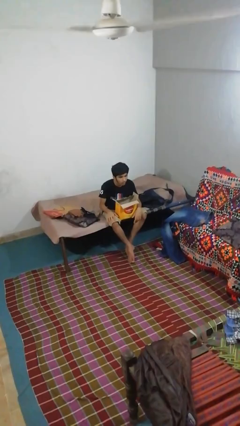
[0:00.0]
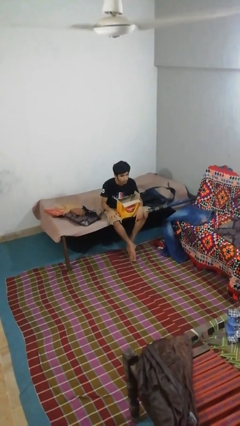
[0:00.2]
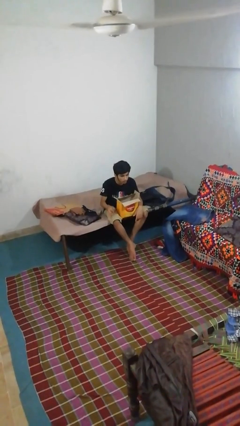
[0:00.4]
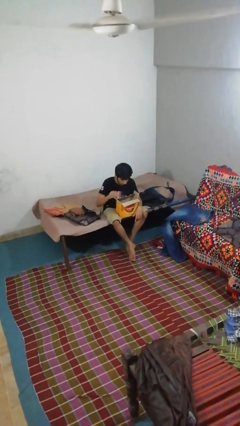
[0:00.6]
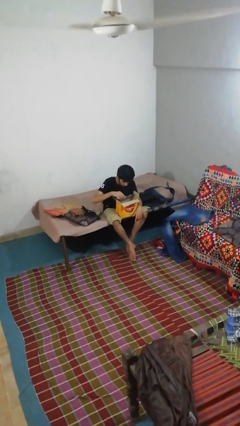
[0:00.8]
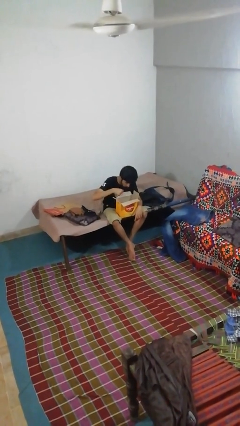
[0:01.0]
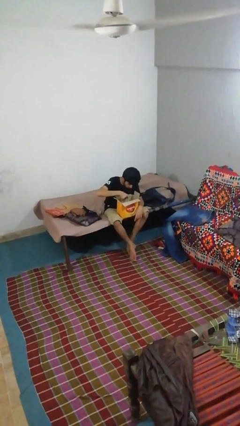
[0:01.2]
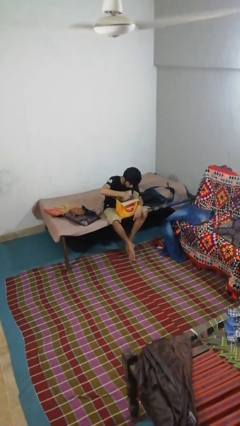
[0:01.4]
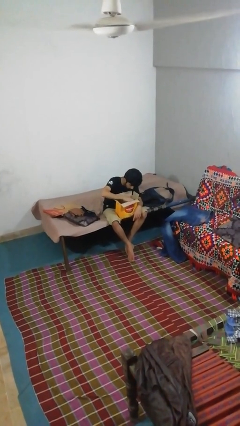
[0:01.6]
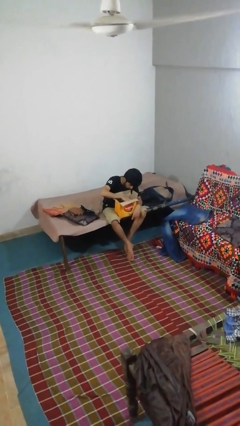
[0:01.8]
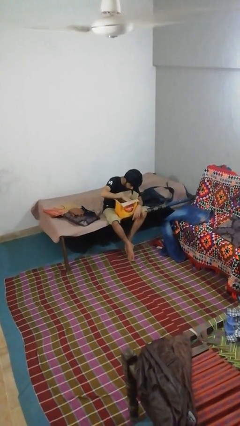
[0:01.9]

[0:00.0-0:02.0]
person searches in box

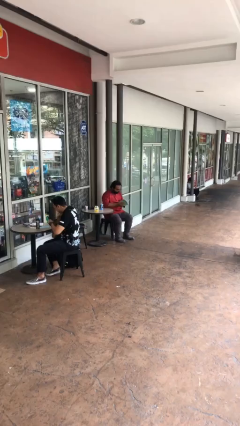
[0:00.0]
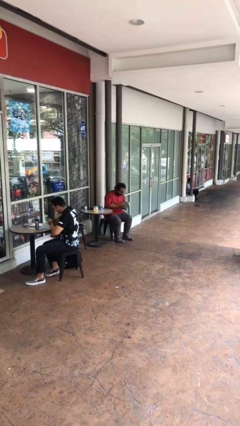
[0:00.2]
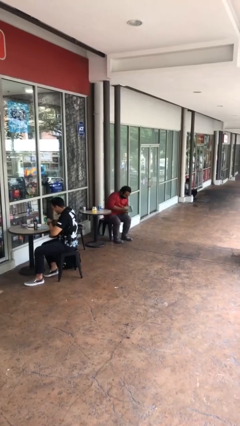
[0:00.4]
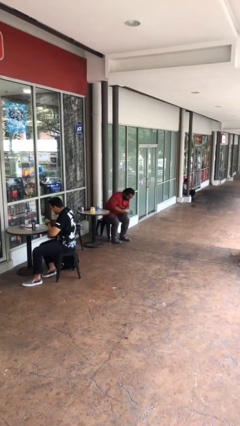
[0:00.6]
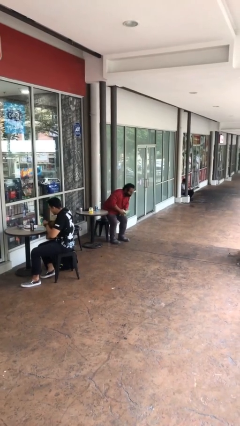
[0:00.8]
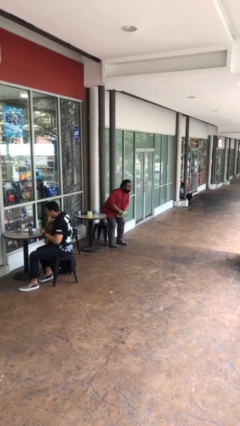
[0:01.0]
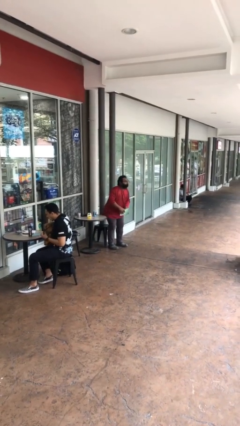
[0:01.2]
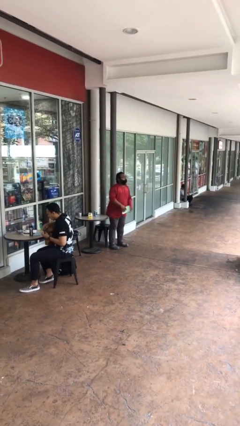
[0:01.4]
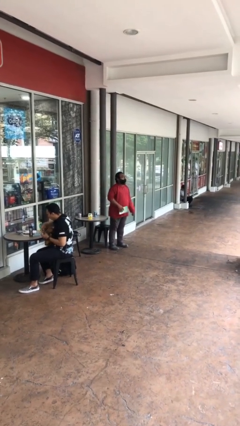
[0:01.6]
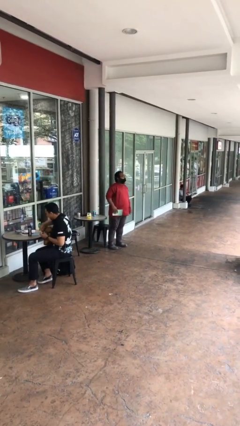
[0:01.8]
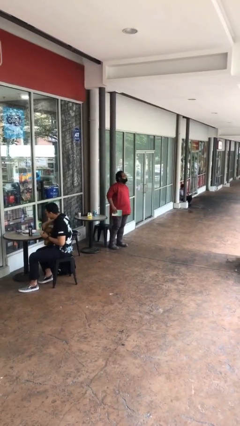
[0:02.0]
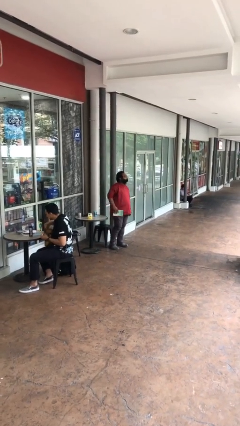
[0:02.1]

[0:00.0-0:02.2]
person stands up

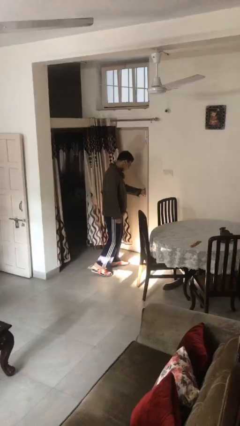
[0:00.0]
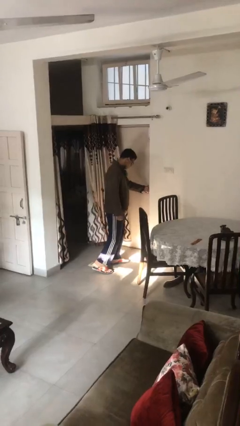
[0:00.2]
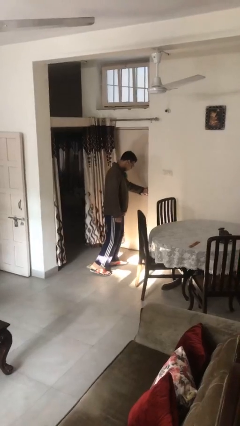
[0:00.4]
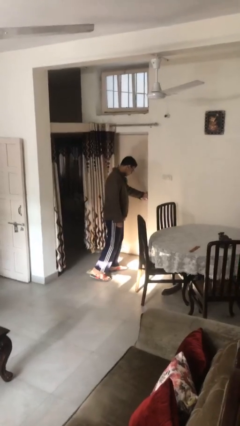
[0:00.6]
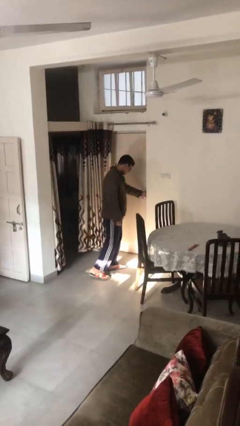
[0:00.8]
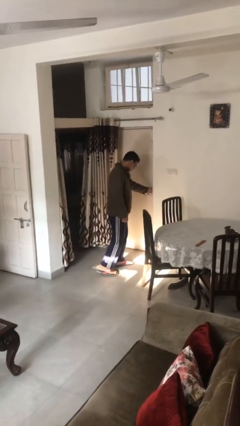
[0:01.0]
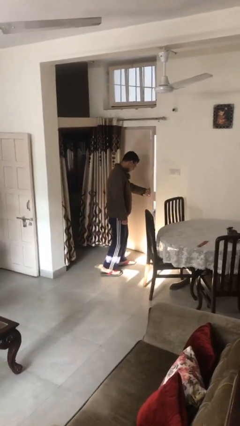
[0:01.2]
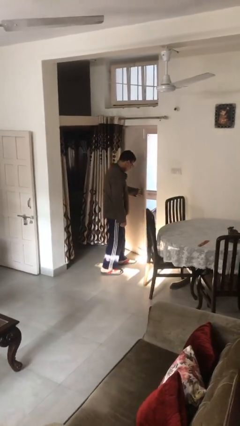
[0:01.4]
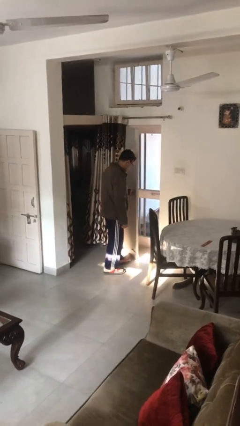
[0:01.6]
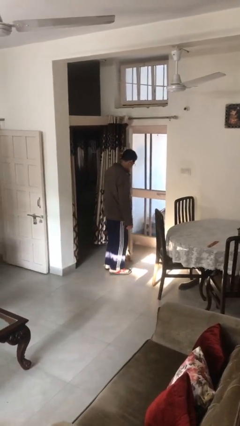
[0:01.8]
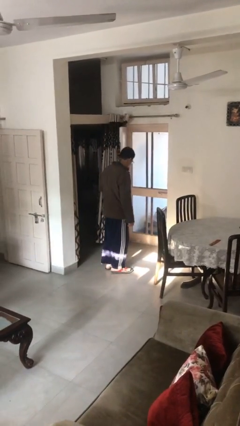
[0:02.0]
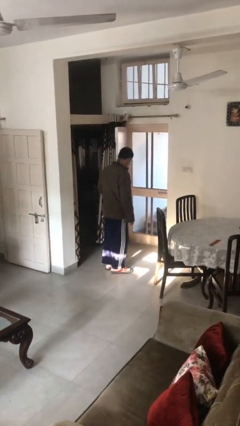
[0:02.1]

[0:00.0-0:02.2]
person opens facility door

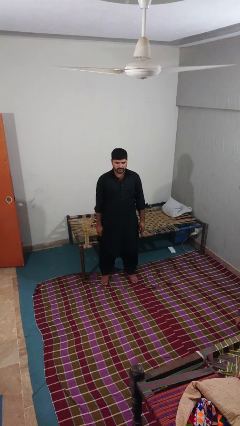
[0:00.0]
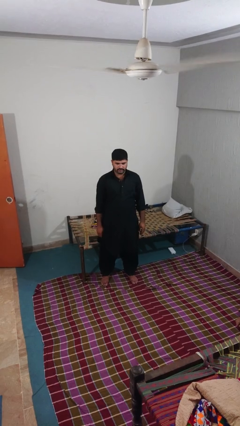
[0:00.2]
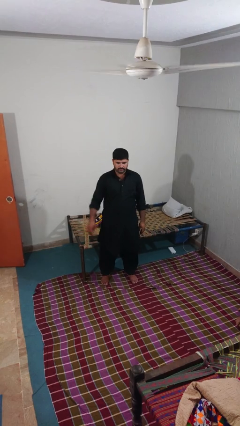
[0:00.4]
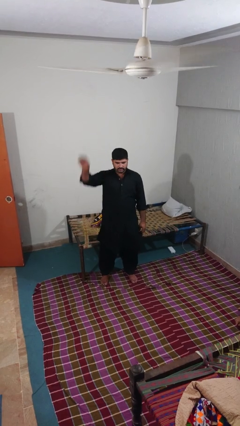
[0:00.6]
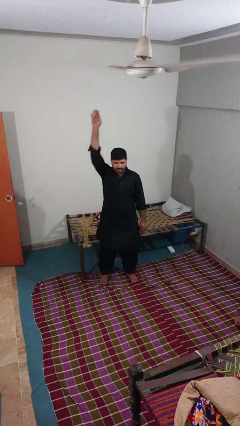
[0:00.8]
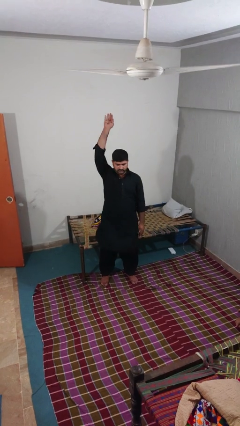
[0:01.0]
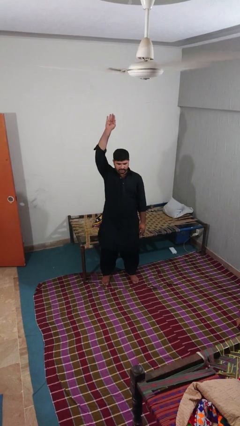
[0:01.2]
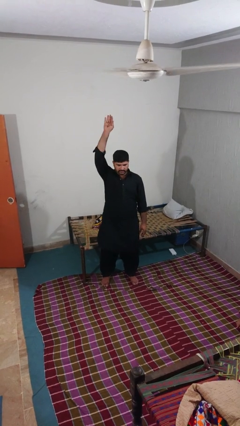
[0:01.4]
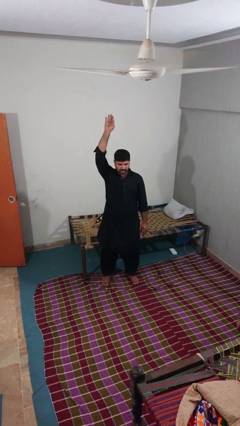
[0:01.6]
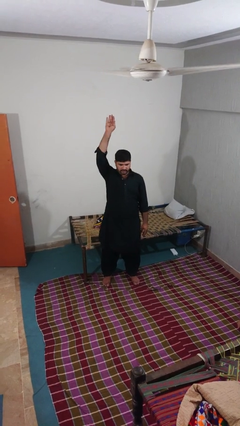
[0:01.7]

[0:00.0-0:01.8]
person gestures raise hand

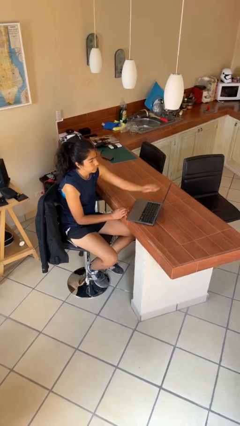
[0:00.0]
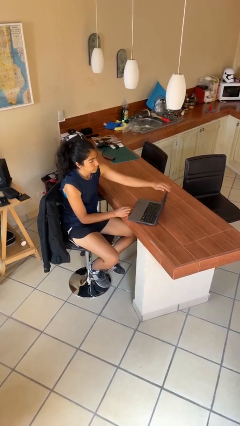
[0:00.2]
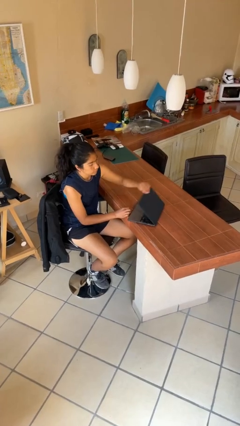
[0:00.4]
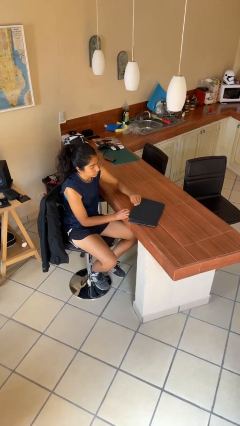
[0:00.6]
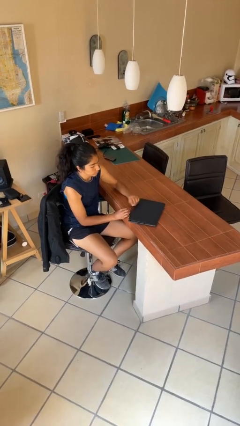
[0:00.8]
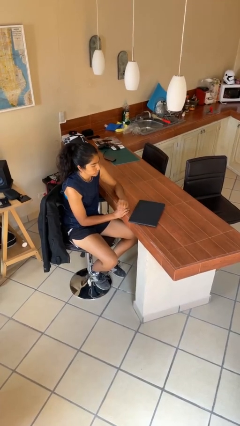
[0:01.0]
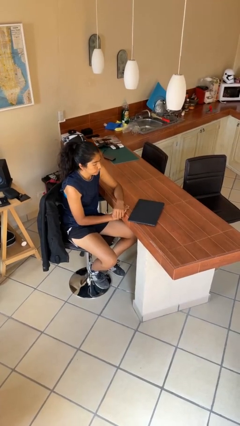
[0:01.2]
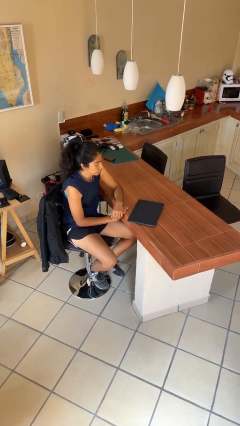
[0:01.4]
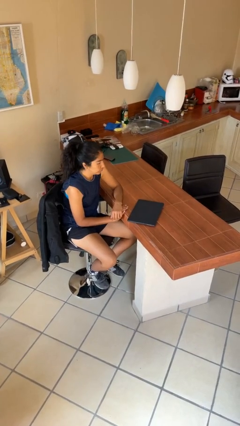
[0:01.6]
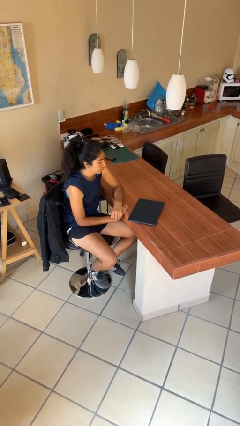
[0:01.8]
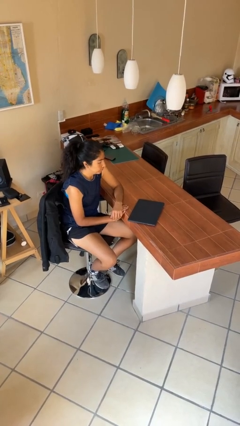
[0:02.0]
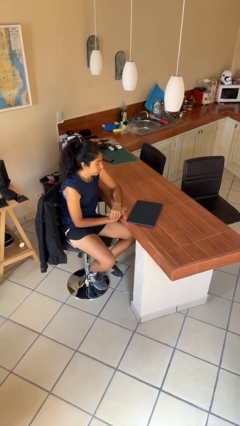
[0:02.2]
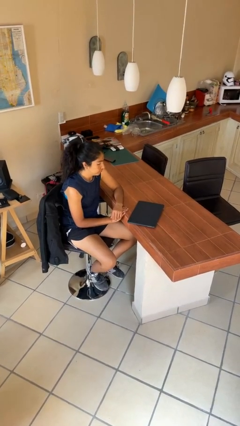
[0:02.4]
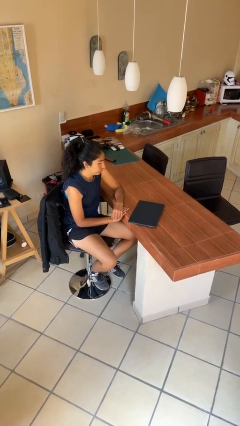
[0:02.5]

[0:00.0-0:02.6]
person closes laptop

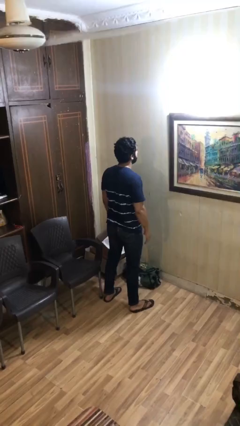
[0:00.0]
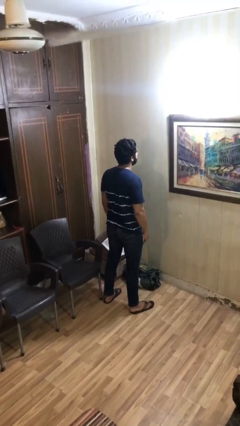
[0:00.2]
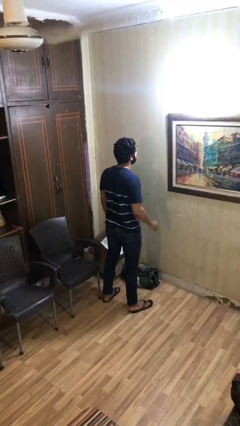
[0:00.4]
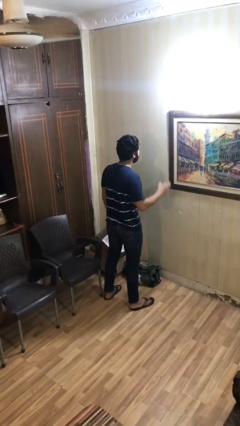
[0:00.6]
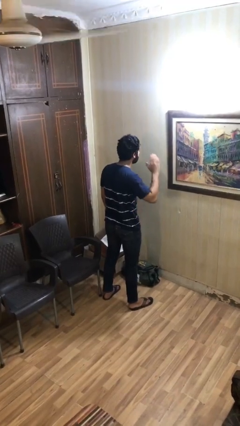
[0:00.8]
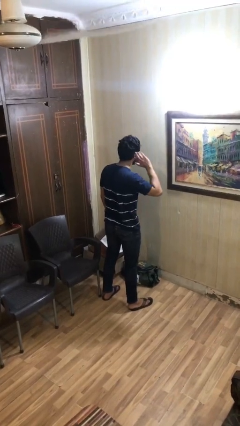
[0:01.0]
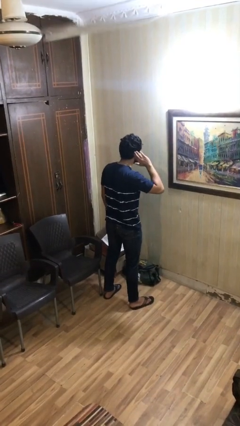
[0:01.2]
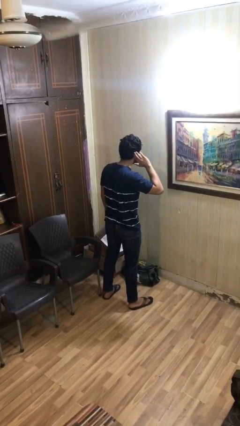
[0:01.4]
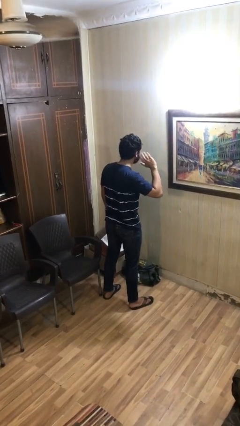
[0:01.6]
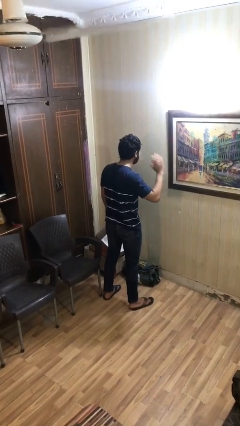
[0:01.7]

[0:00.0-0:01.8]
person gestures listen closely

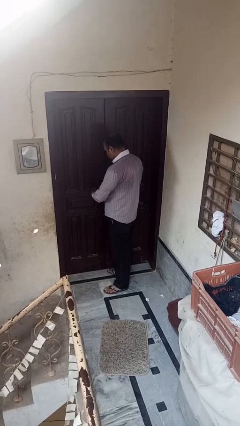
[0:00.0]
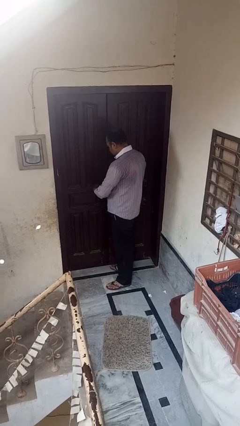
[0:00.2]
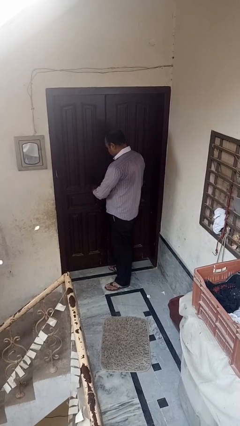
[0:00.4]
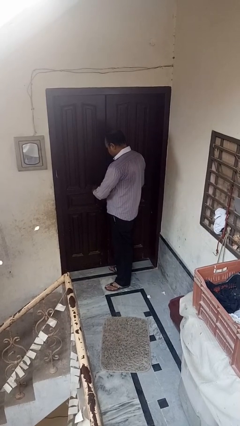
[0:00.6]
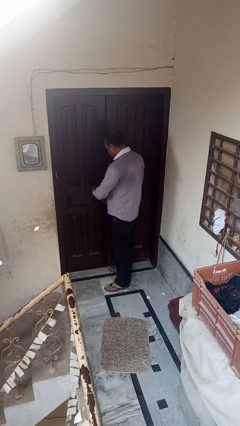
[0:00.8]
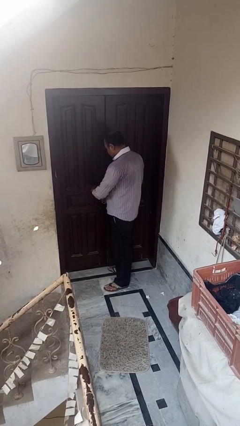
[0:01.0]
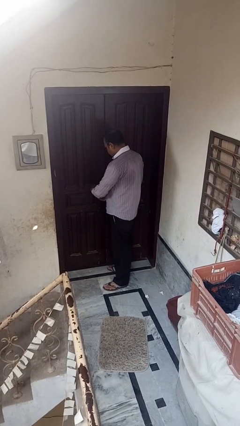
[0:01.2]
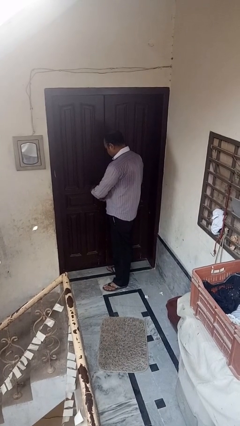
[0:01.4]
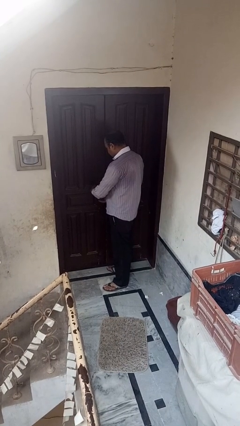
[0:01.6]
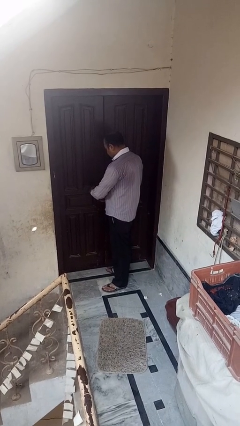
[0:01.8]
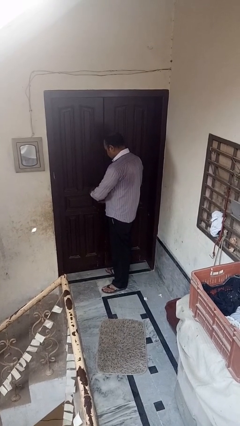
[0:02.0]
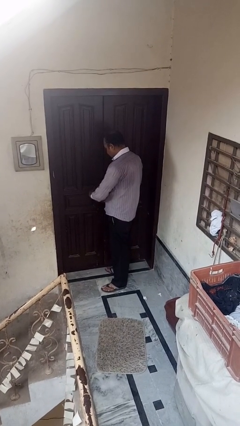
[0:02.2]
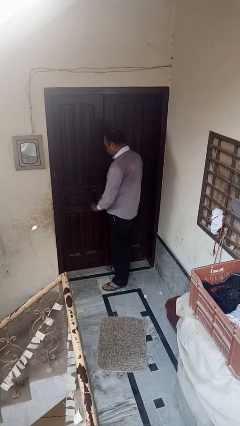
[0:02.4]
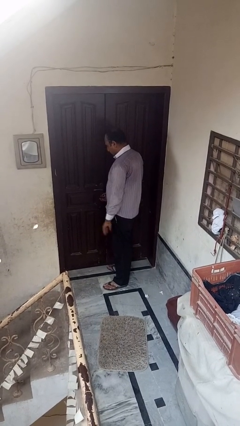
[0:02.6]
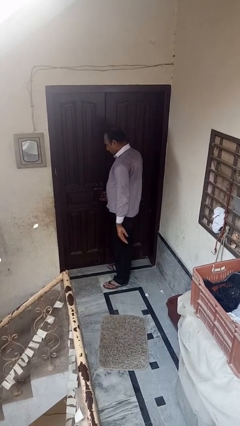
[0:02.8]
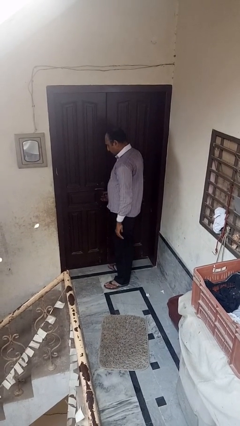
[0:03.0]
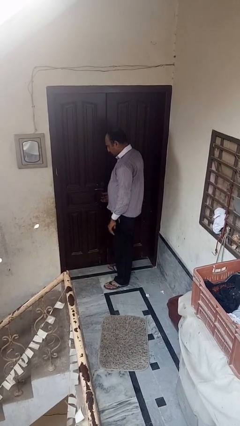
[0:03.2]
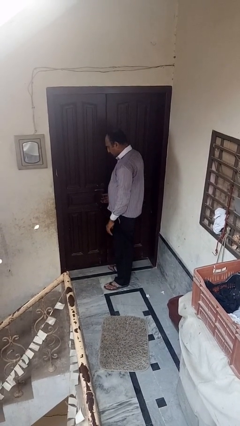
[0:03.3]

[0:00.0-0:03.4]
person locks door with keys

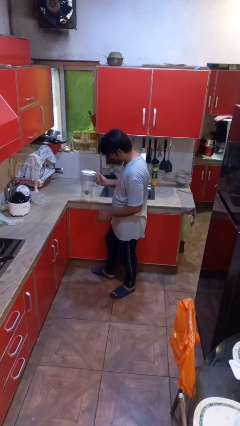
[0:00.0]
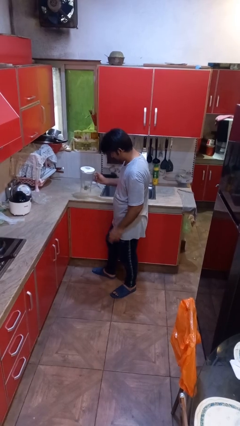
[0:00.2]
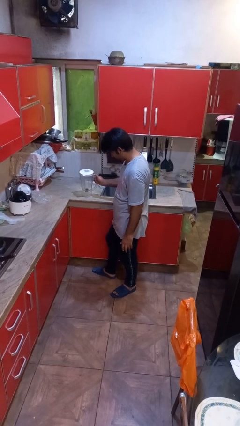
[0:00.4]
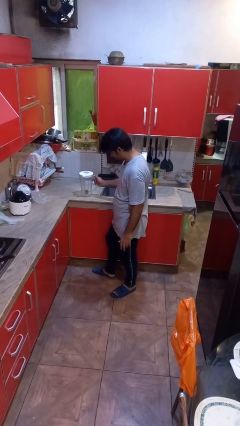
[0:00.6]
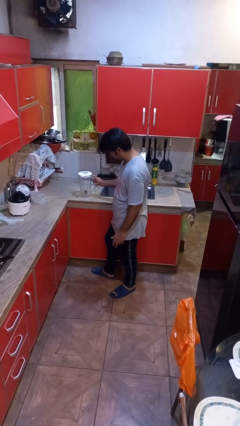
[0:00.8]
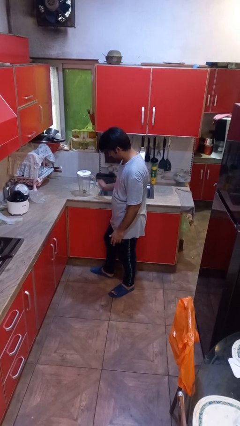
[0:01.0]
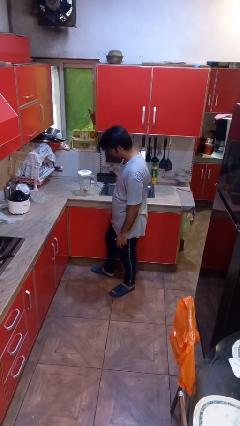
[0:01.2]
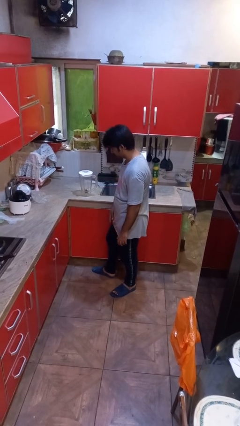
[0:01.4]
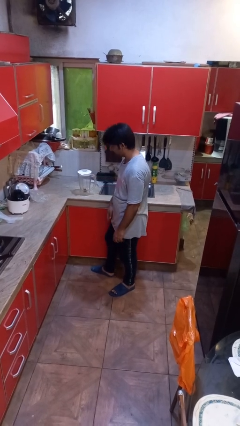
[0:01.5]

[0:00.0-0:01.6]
person puts down object on countertop
